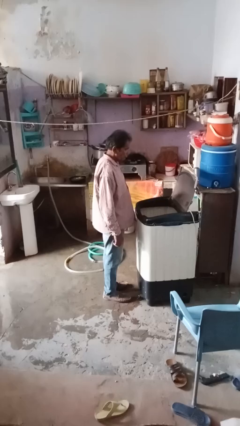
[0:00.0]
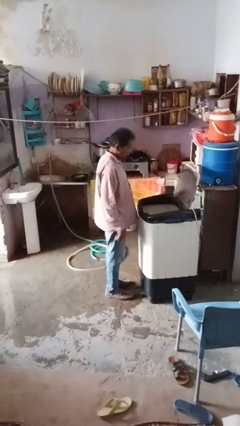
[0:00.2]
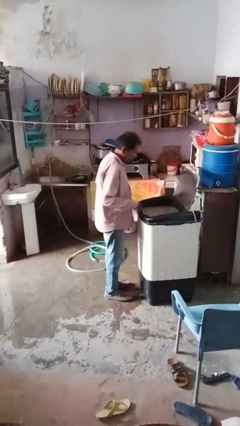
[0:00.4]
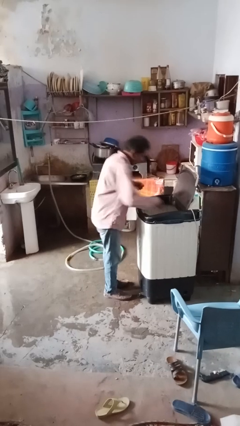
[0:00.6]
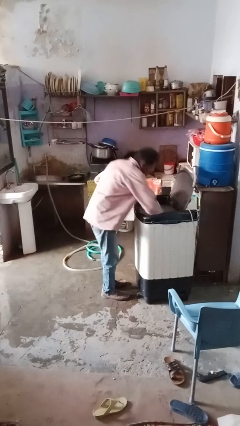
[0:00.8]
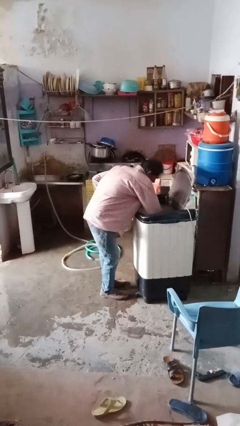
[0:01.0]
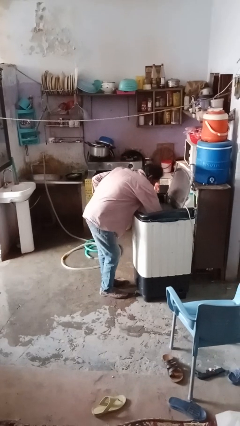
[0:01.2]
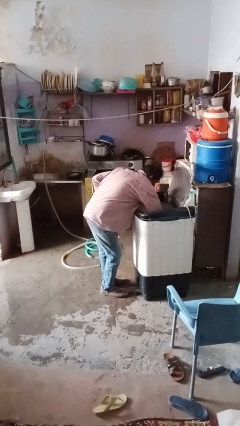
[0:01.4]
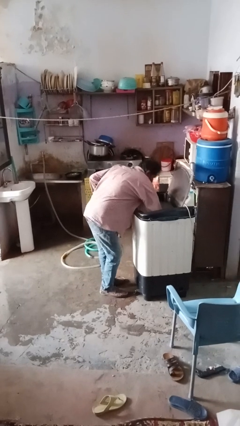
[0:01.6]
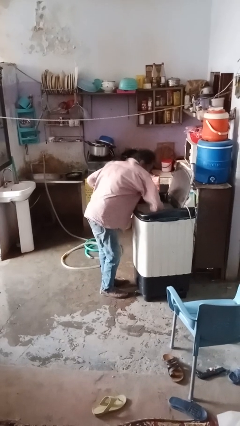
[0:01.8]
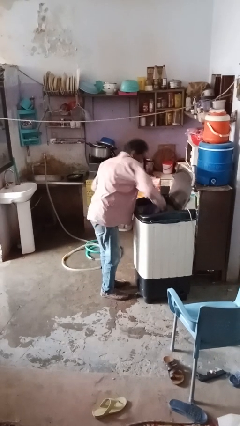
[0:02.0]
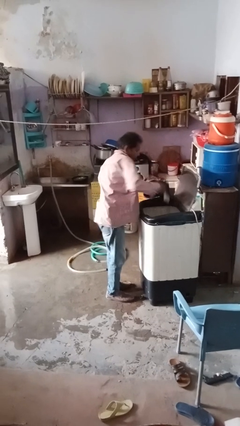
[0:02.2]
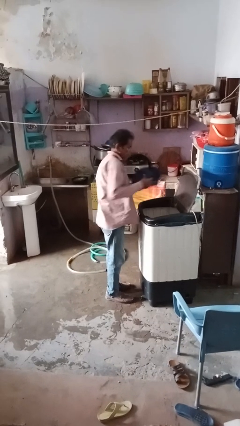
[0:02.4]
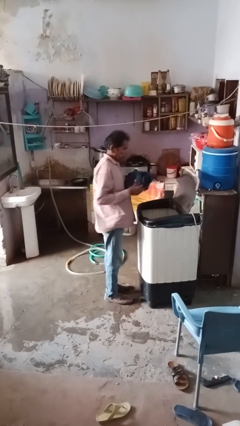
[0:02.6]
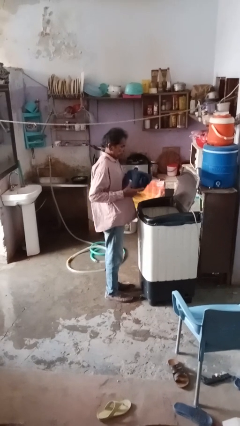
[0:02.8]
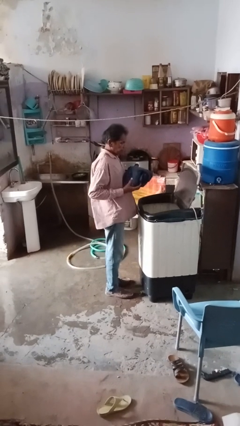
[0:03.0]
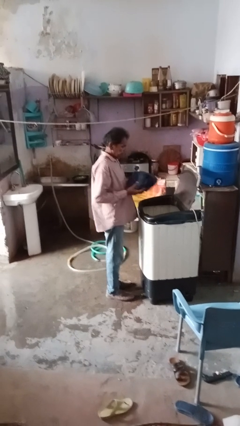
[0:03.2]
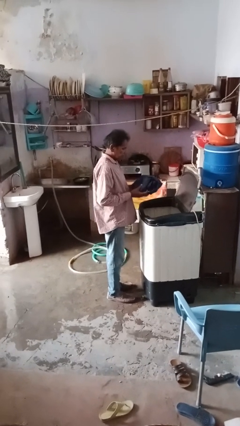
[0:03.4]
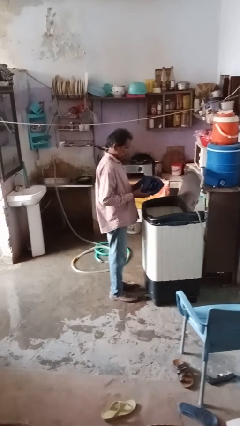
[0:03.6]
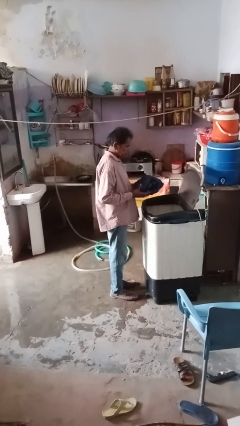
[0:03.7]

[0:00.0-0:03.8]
person unloads clotheswasher

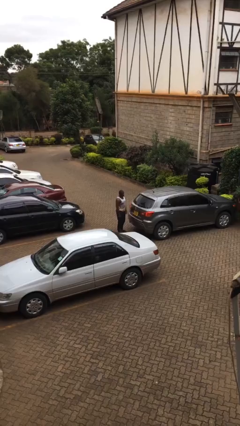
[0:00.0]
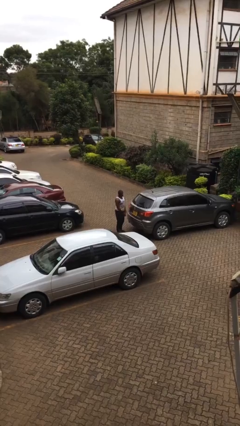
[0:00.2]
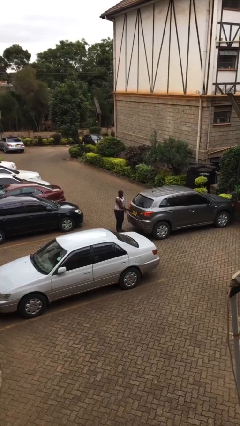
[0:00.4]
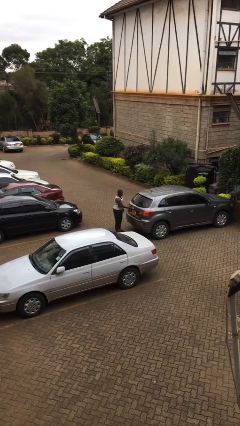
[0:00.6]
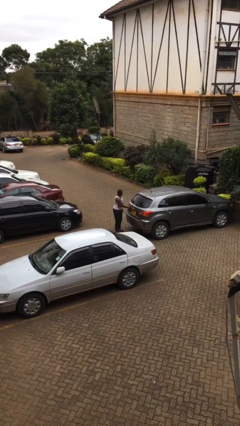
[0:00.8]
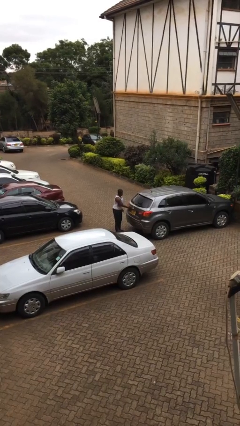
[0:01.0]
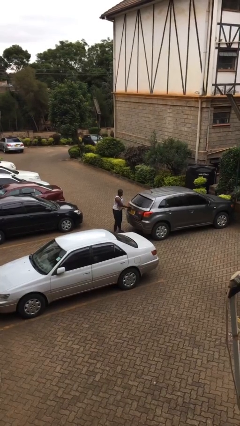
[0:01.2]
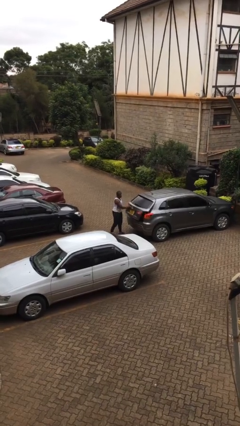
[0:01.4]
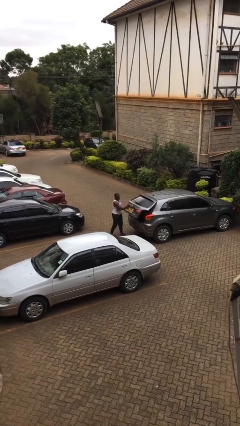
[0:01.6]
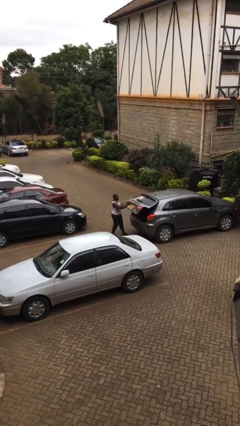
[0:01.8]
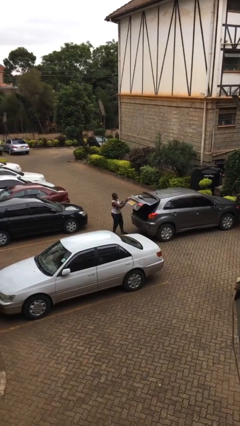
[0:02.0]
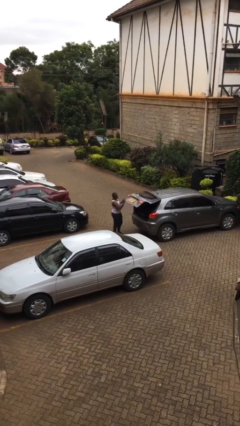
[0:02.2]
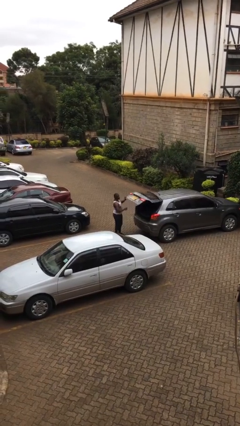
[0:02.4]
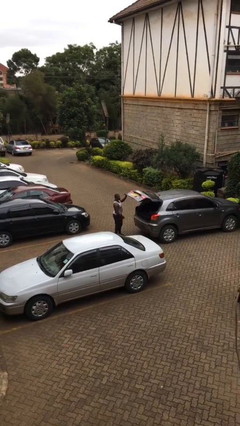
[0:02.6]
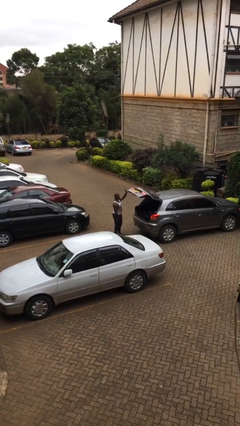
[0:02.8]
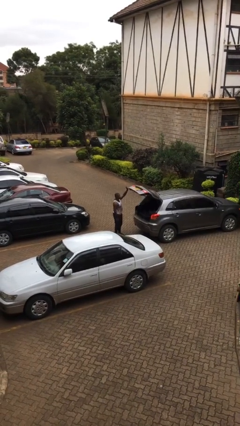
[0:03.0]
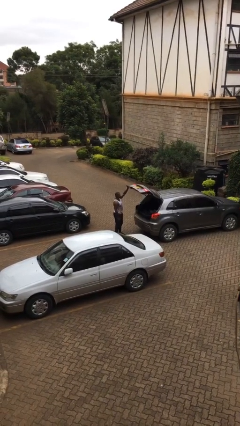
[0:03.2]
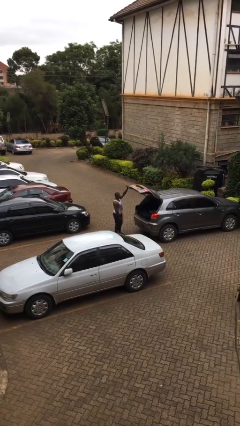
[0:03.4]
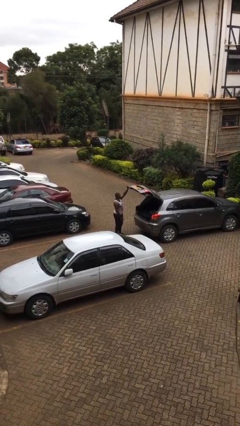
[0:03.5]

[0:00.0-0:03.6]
person opens car trunk

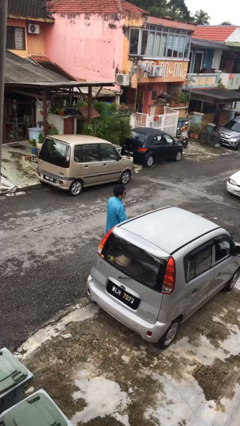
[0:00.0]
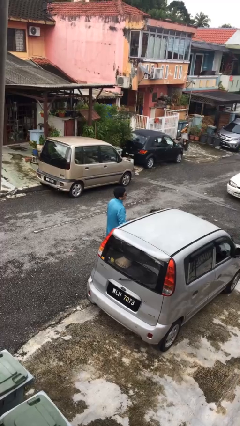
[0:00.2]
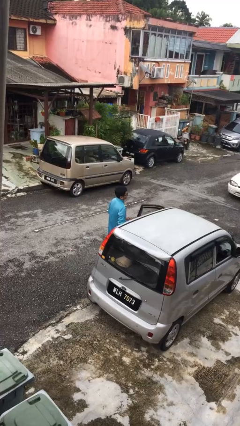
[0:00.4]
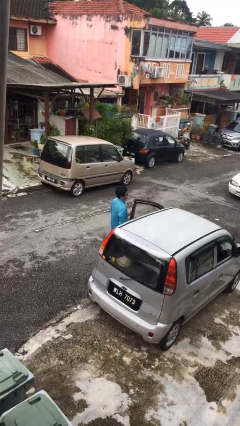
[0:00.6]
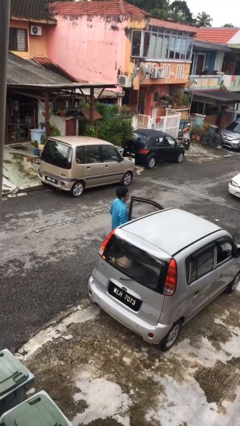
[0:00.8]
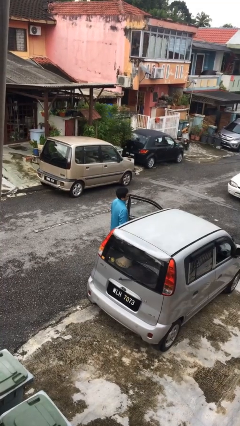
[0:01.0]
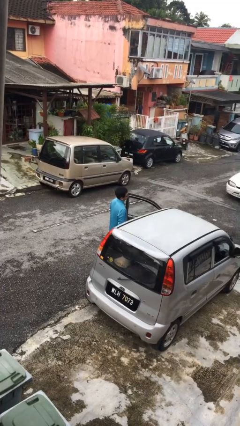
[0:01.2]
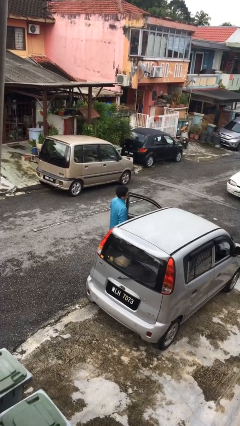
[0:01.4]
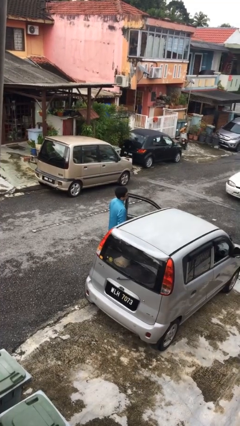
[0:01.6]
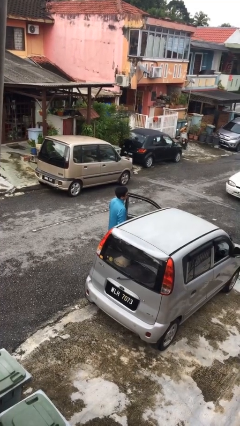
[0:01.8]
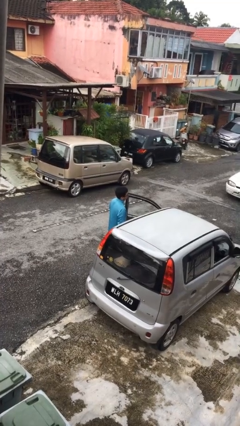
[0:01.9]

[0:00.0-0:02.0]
person opens car door

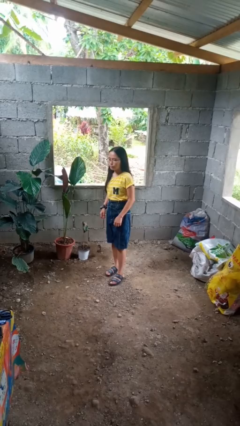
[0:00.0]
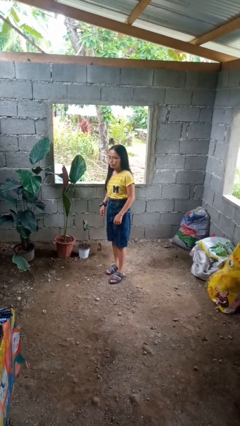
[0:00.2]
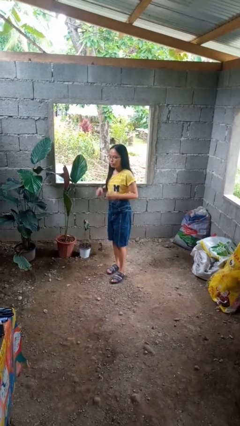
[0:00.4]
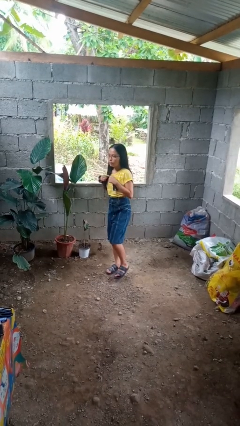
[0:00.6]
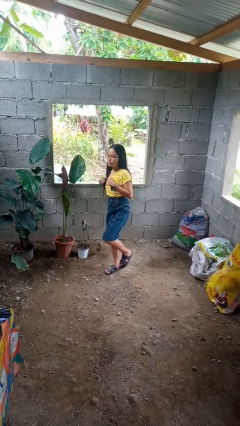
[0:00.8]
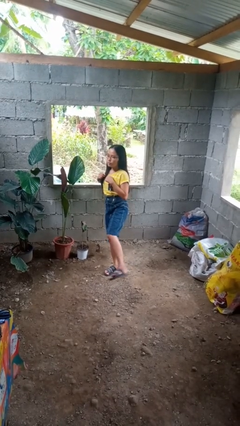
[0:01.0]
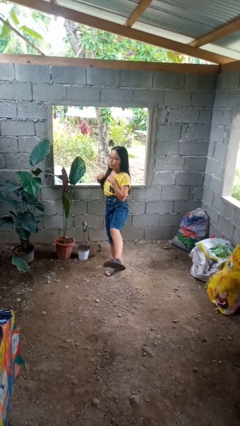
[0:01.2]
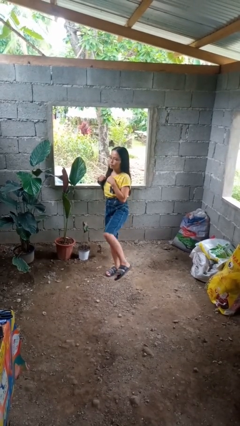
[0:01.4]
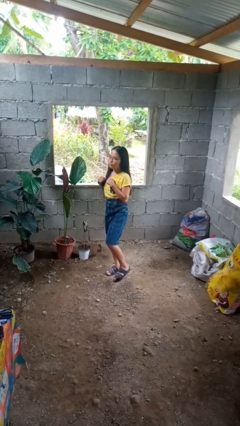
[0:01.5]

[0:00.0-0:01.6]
person karate kicks

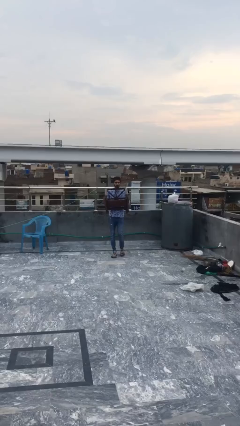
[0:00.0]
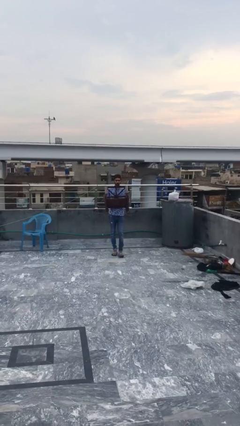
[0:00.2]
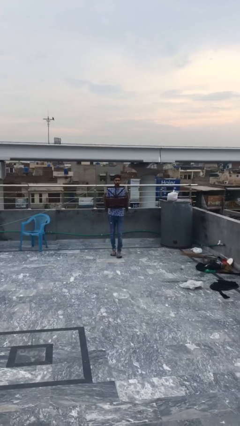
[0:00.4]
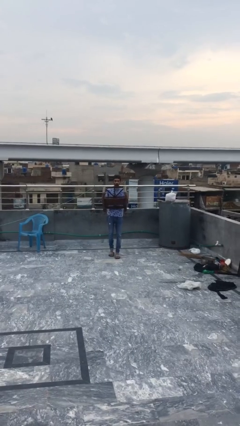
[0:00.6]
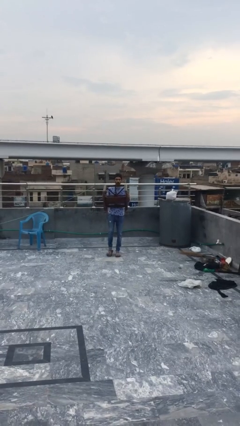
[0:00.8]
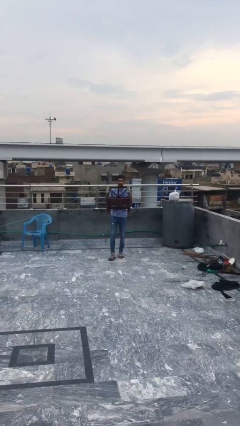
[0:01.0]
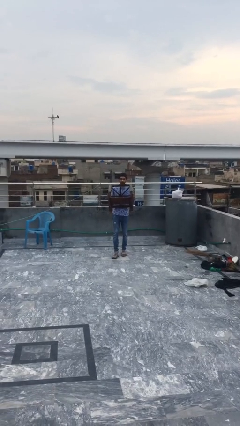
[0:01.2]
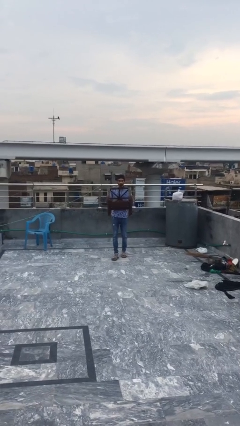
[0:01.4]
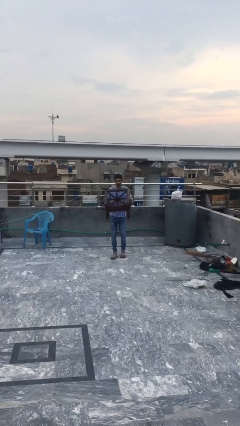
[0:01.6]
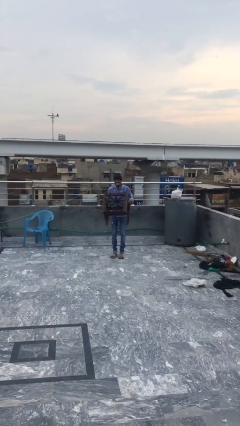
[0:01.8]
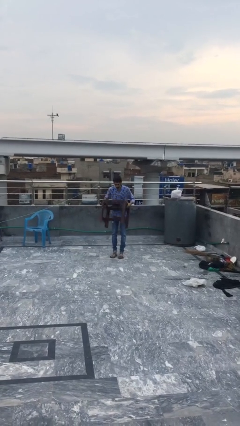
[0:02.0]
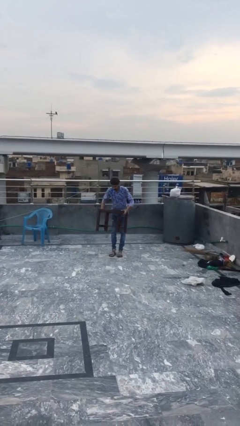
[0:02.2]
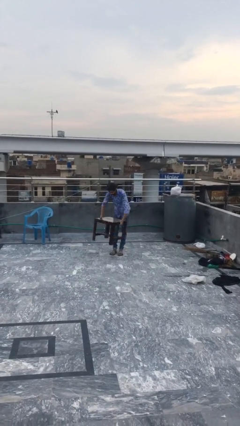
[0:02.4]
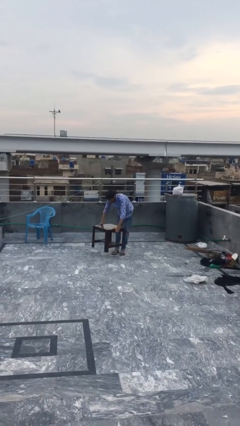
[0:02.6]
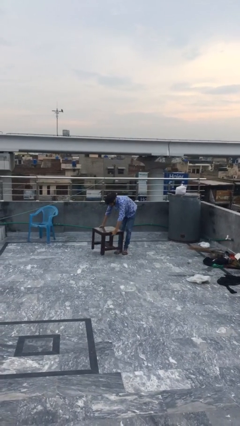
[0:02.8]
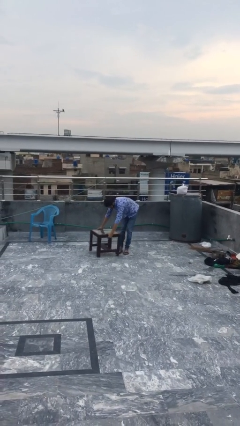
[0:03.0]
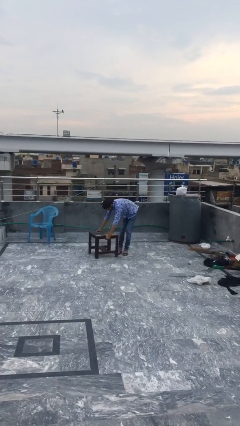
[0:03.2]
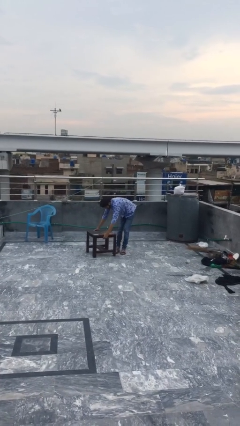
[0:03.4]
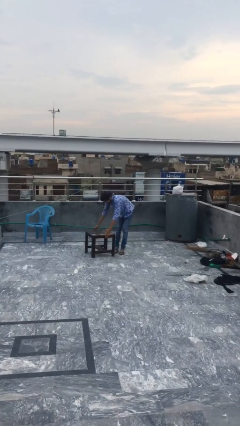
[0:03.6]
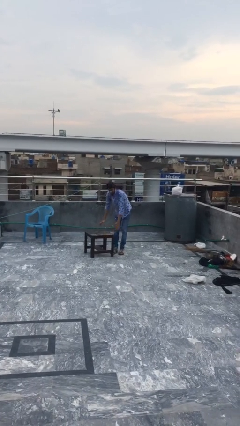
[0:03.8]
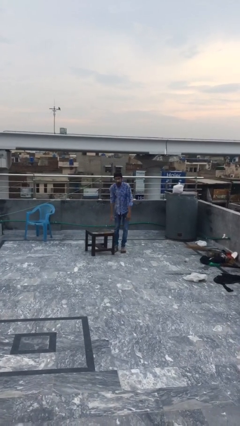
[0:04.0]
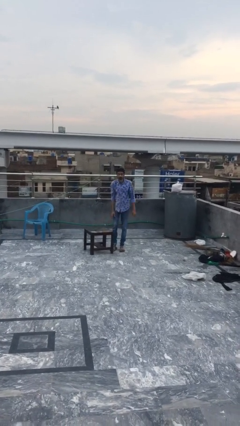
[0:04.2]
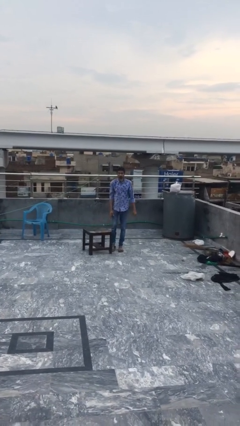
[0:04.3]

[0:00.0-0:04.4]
person puts down object on floor

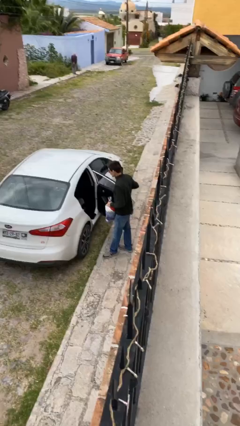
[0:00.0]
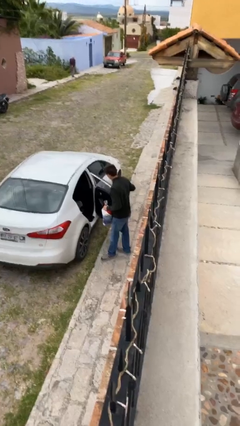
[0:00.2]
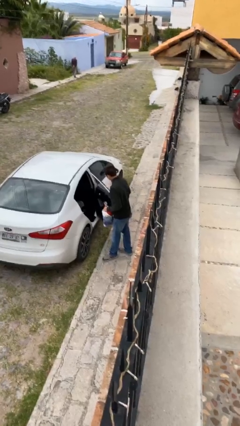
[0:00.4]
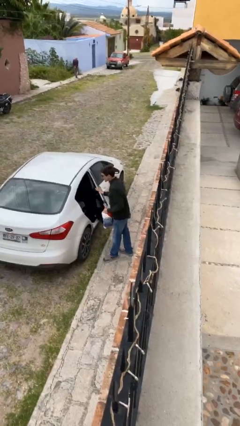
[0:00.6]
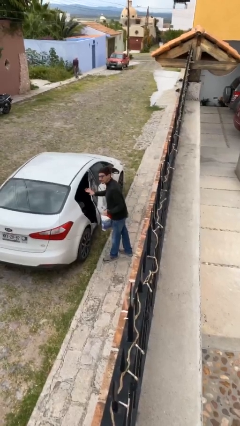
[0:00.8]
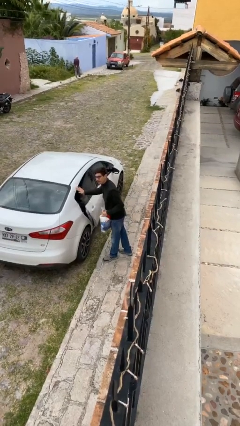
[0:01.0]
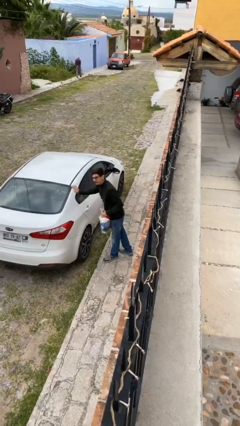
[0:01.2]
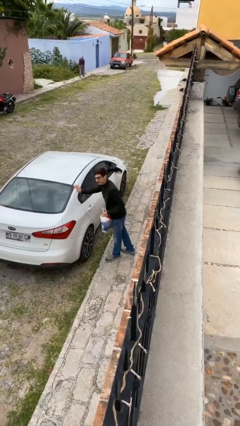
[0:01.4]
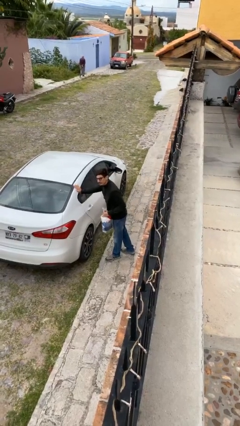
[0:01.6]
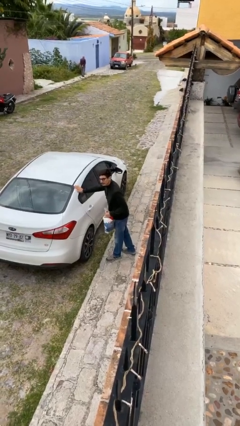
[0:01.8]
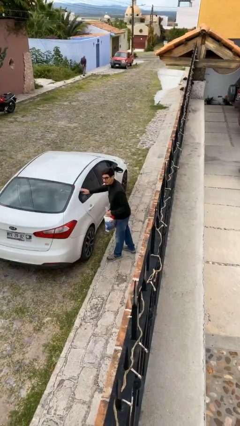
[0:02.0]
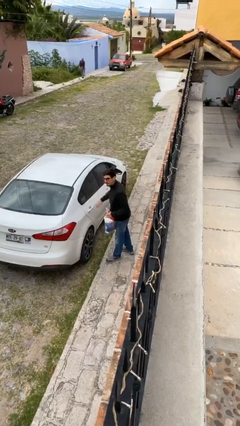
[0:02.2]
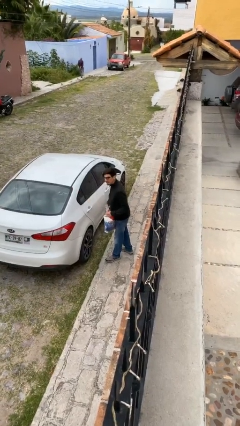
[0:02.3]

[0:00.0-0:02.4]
person closes car door
